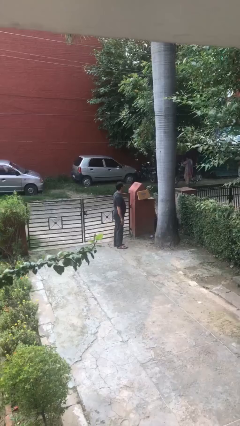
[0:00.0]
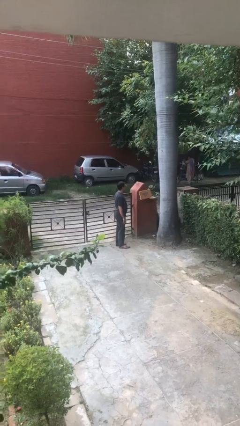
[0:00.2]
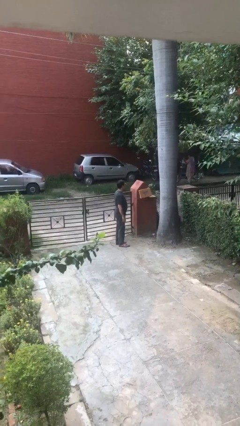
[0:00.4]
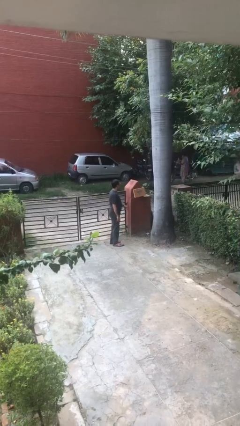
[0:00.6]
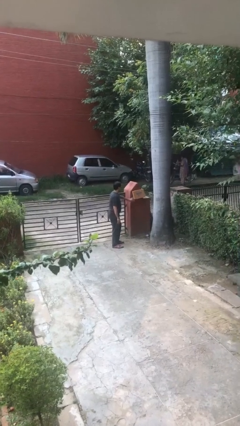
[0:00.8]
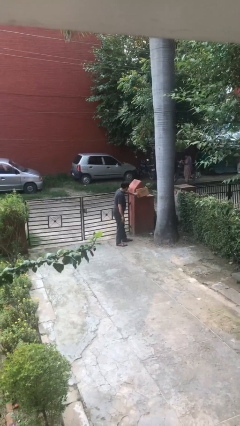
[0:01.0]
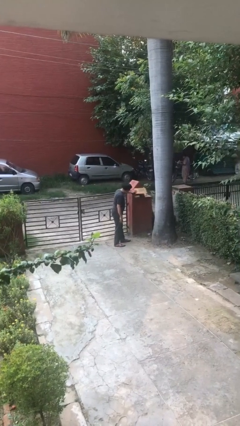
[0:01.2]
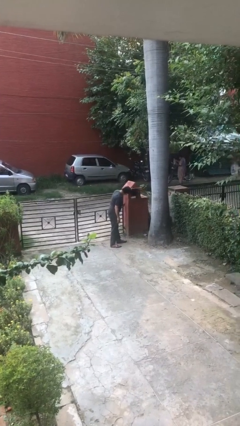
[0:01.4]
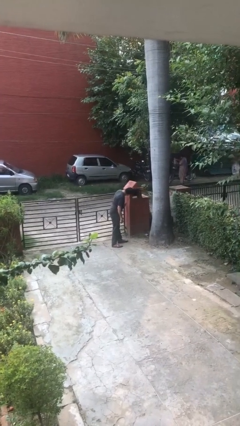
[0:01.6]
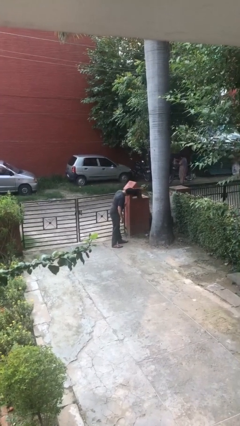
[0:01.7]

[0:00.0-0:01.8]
person opens mailbox

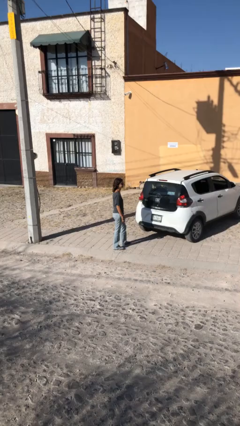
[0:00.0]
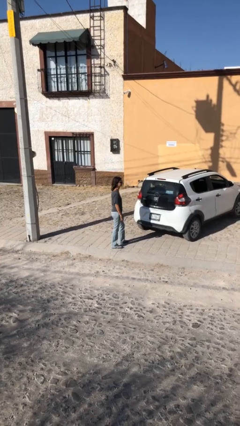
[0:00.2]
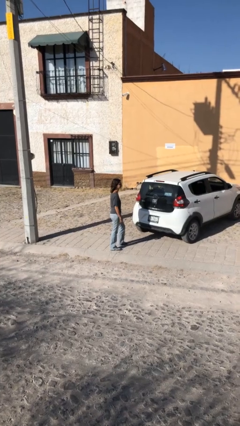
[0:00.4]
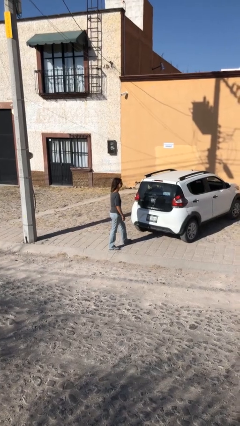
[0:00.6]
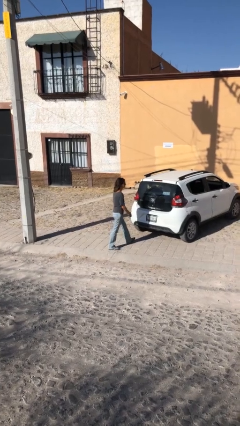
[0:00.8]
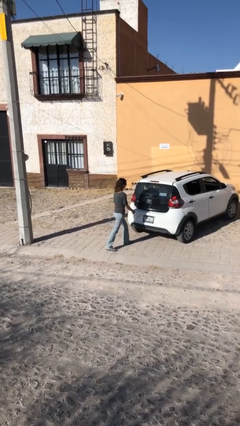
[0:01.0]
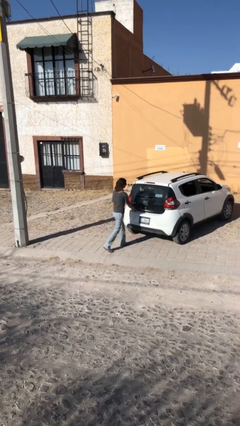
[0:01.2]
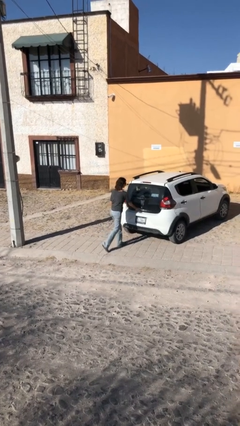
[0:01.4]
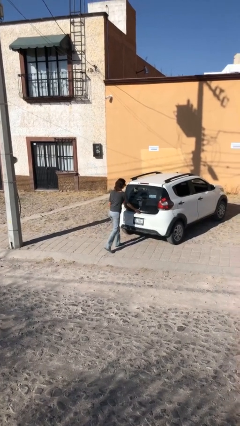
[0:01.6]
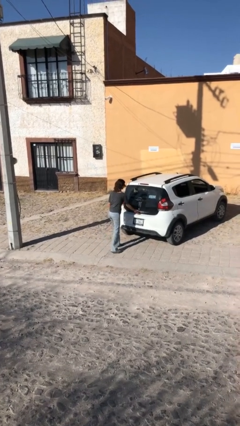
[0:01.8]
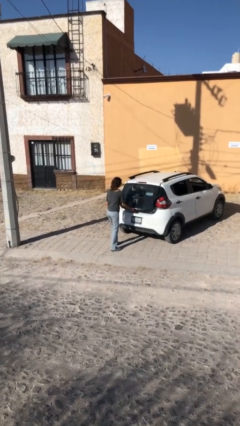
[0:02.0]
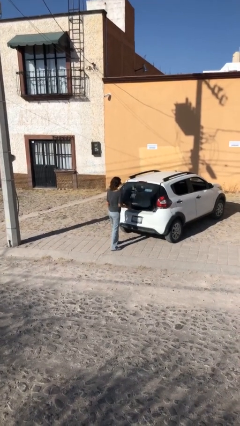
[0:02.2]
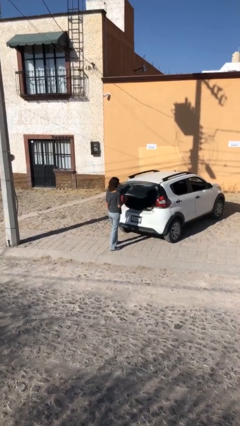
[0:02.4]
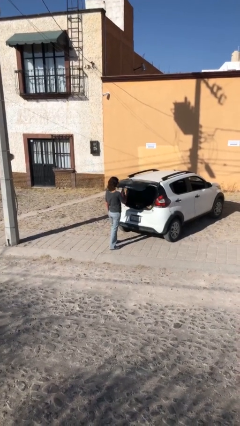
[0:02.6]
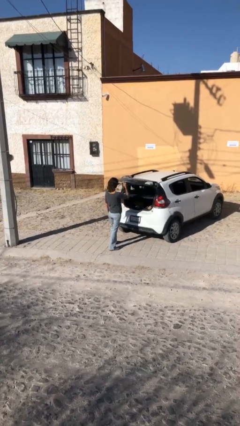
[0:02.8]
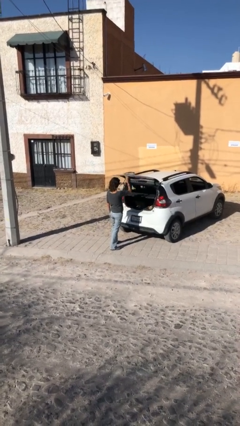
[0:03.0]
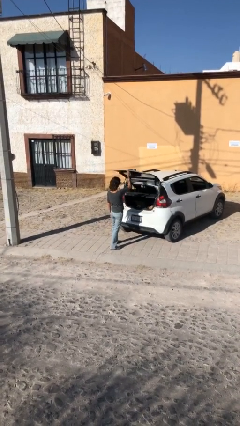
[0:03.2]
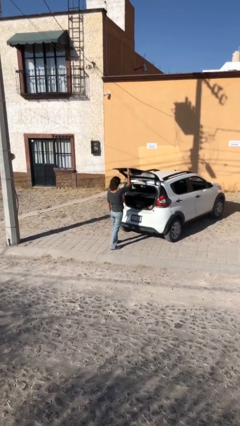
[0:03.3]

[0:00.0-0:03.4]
person opens car trunk

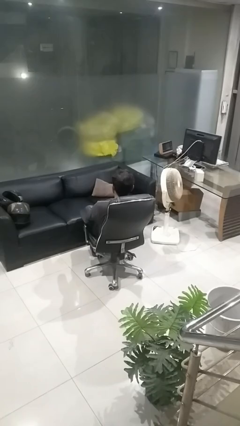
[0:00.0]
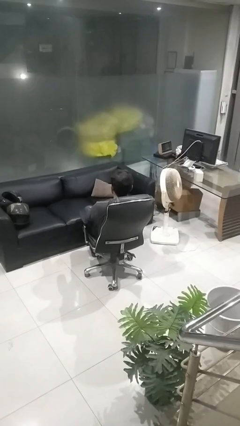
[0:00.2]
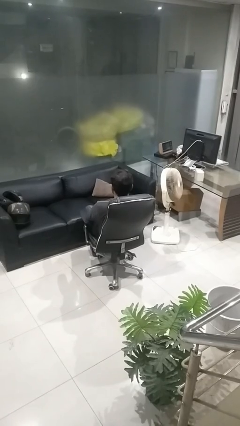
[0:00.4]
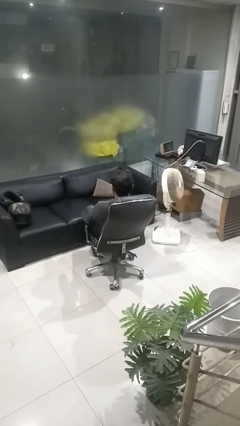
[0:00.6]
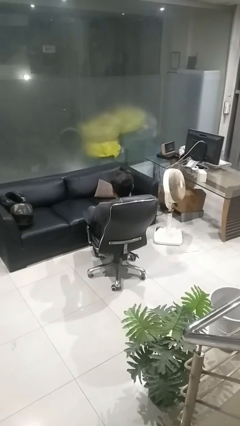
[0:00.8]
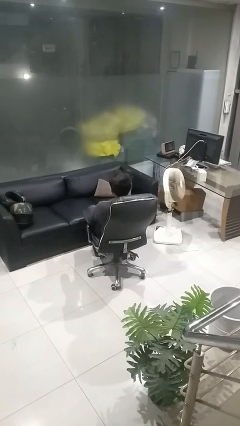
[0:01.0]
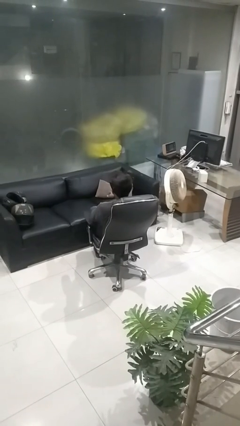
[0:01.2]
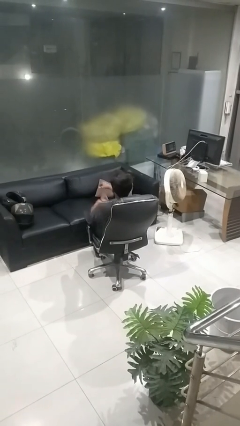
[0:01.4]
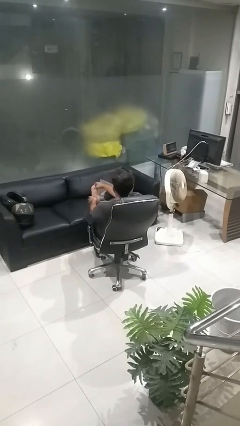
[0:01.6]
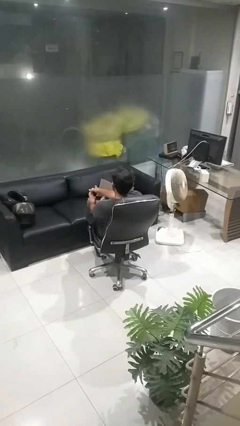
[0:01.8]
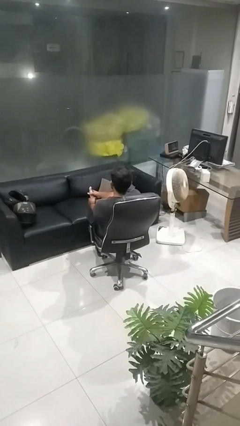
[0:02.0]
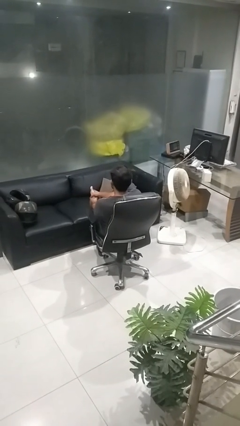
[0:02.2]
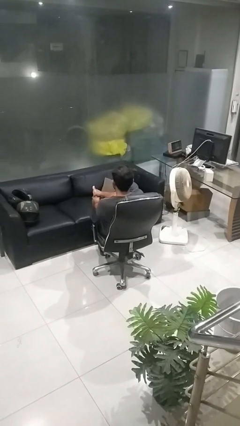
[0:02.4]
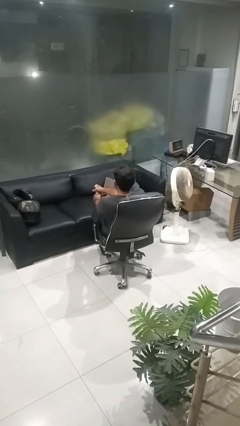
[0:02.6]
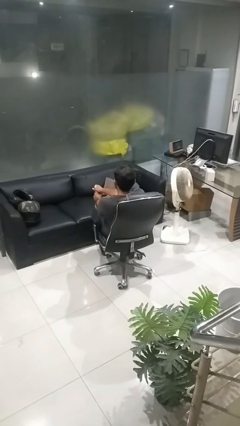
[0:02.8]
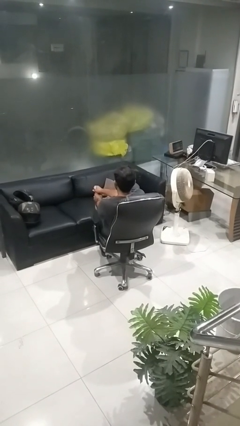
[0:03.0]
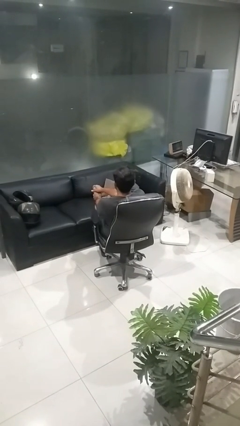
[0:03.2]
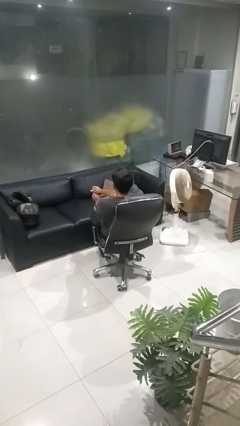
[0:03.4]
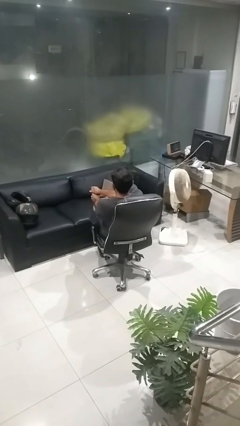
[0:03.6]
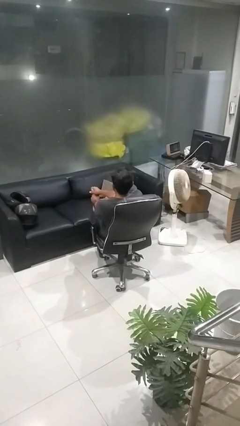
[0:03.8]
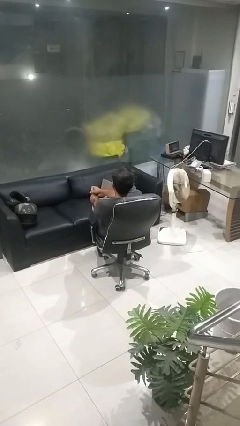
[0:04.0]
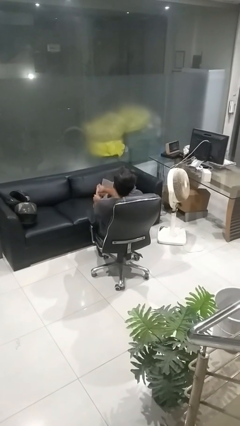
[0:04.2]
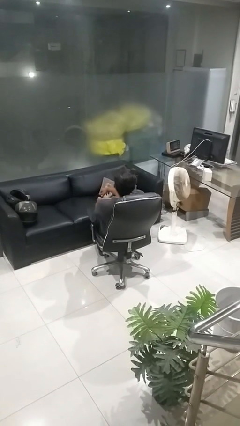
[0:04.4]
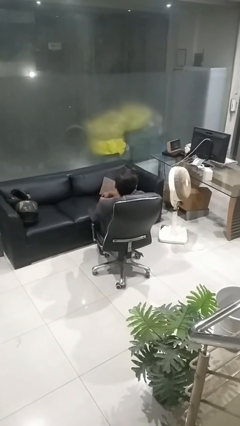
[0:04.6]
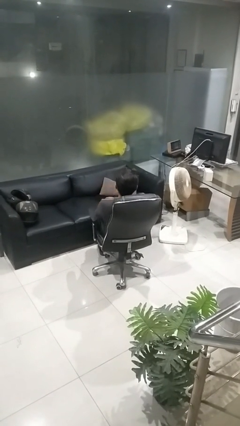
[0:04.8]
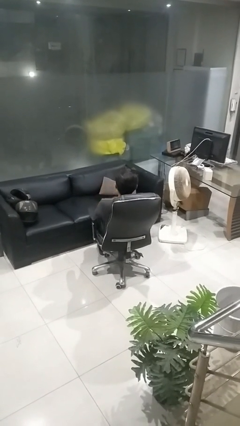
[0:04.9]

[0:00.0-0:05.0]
person rubs foot

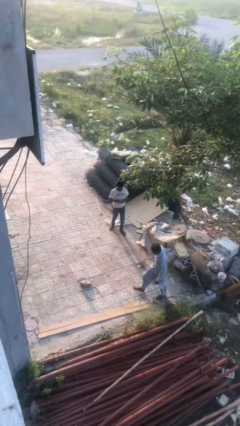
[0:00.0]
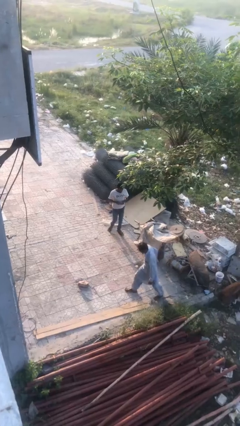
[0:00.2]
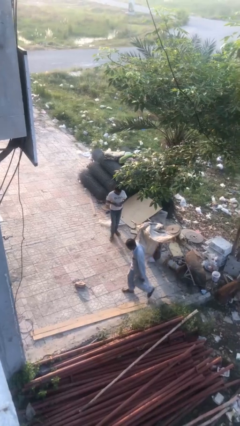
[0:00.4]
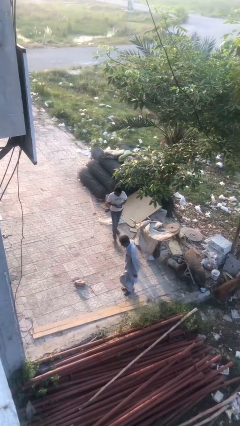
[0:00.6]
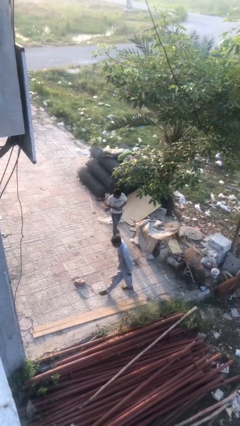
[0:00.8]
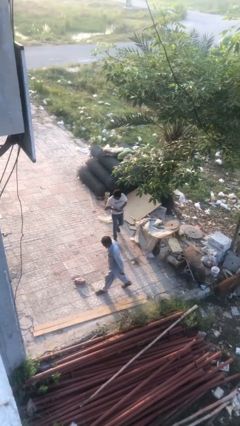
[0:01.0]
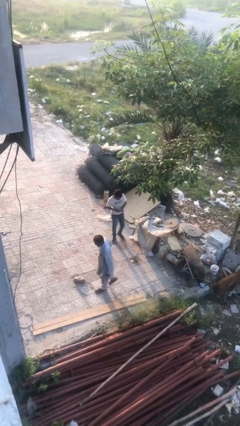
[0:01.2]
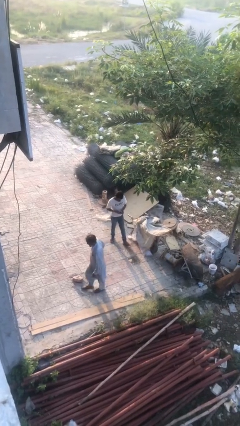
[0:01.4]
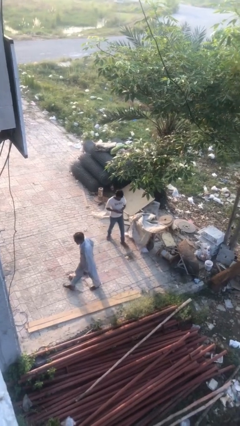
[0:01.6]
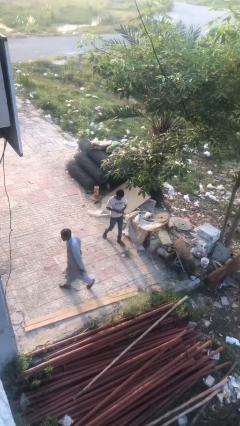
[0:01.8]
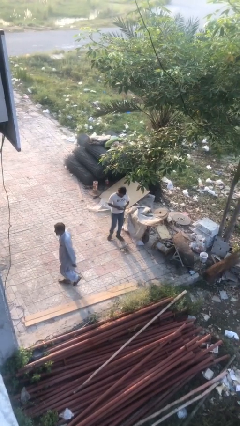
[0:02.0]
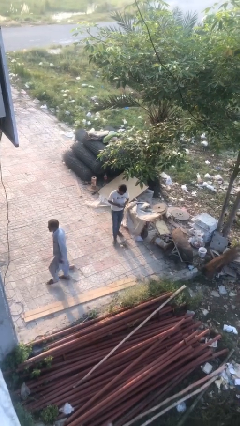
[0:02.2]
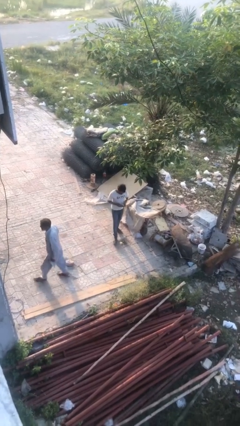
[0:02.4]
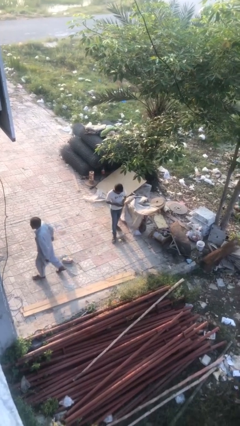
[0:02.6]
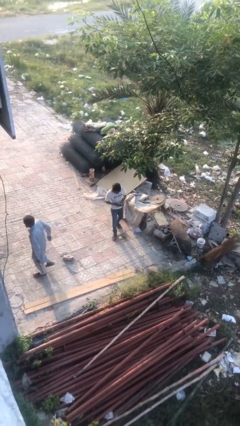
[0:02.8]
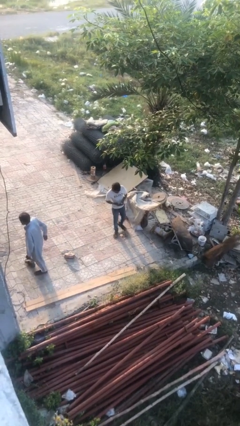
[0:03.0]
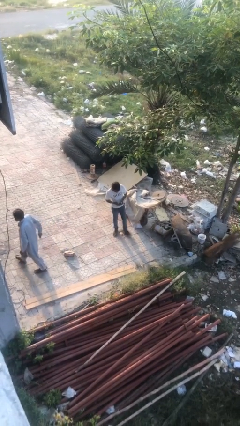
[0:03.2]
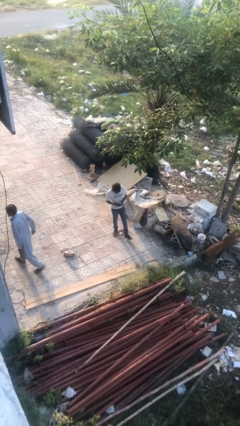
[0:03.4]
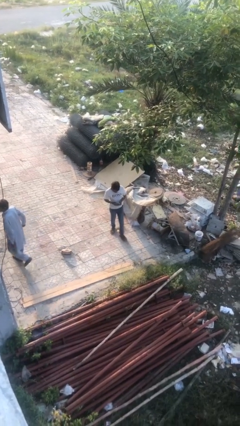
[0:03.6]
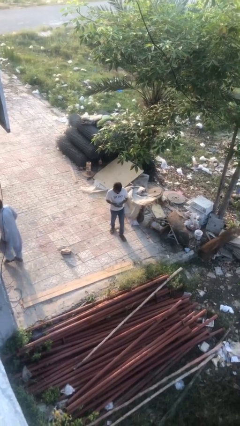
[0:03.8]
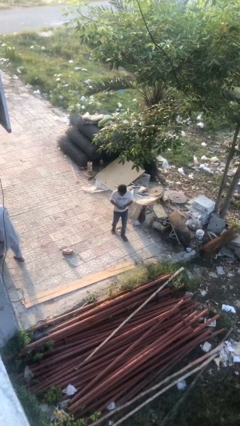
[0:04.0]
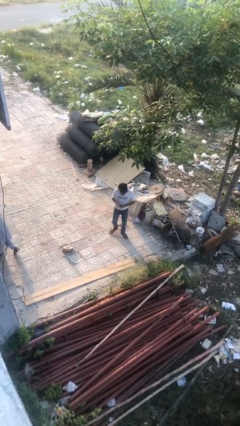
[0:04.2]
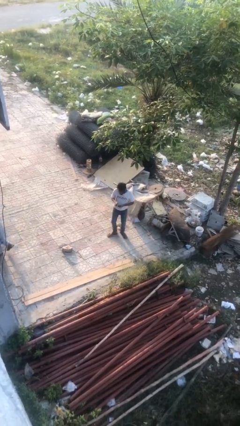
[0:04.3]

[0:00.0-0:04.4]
person texts on phone

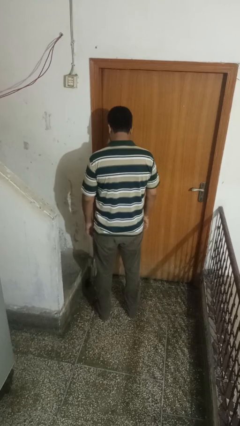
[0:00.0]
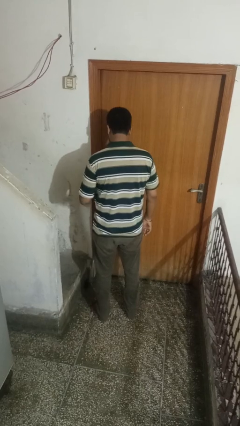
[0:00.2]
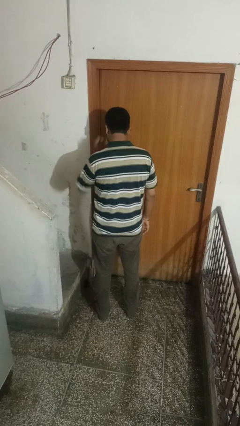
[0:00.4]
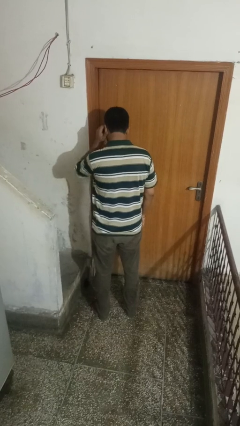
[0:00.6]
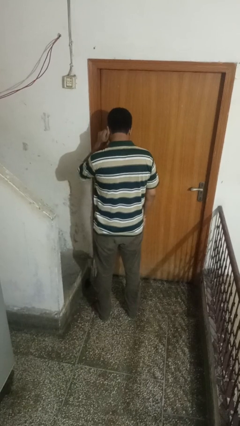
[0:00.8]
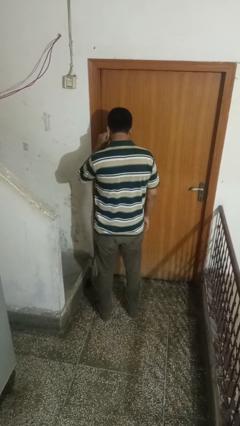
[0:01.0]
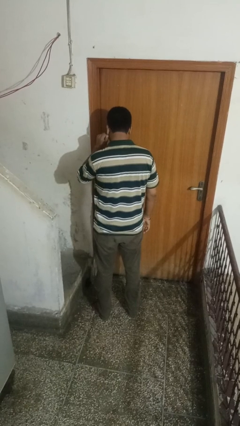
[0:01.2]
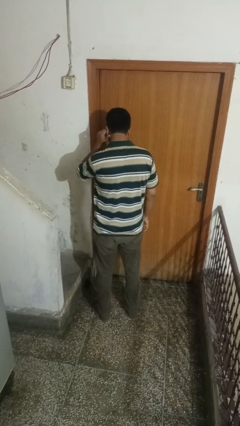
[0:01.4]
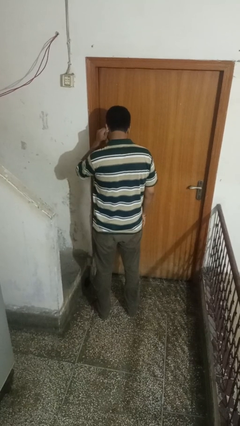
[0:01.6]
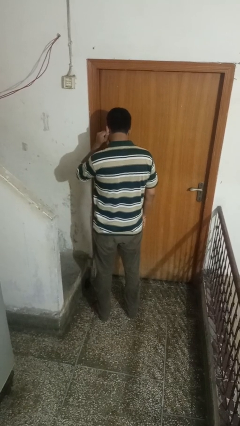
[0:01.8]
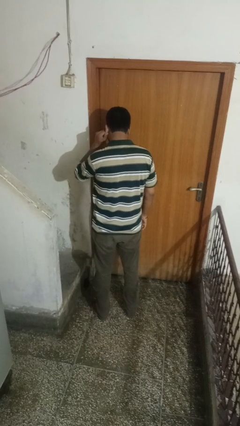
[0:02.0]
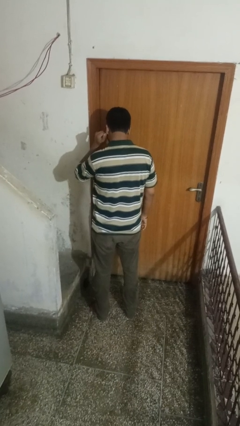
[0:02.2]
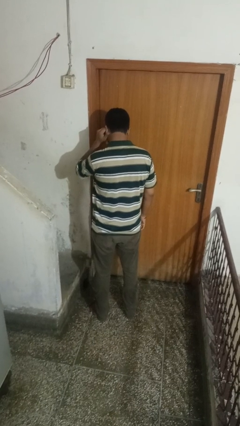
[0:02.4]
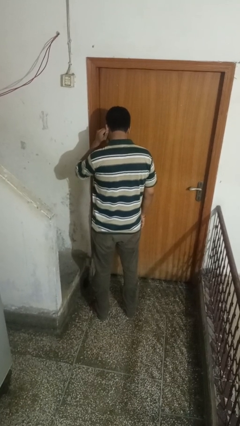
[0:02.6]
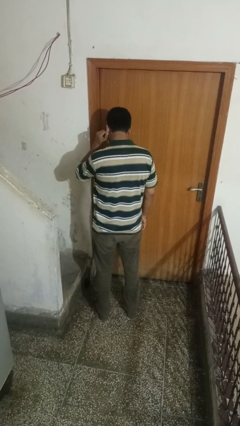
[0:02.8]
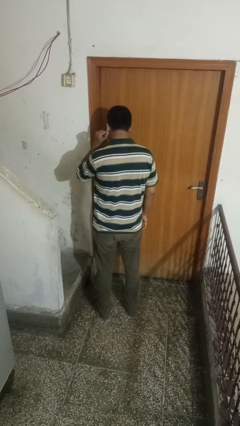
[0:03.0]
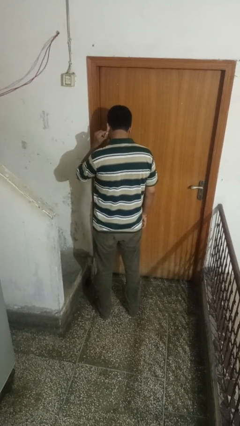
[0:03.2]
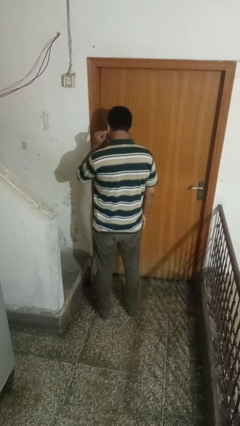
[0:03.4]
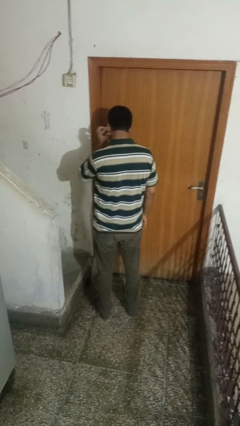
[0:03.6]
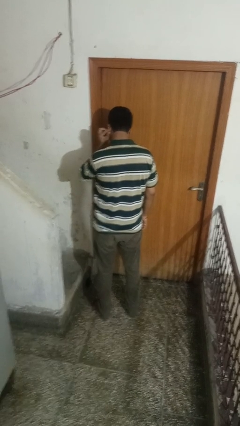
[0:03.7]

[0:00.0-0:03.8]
person touches earlobe
